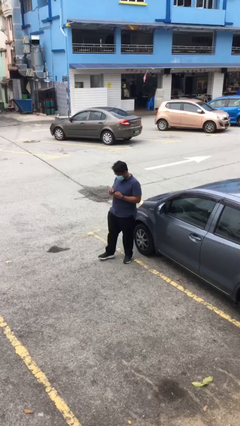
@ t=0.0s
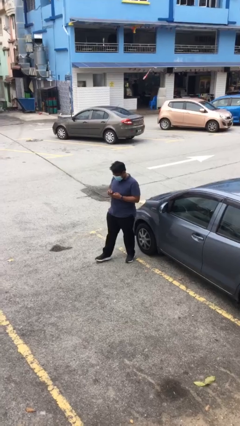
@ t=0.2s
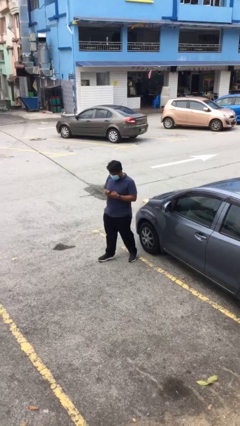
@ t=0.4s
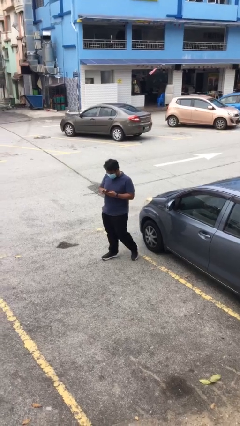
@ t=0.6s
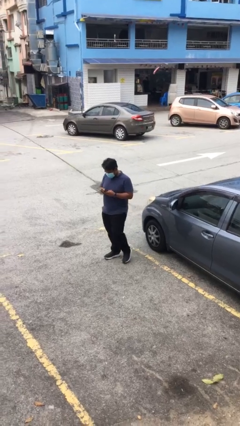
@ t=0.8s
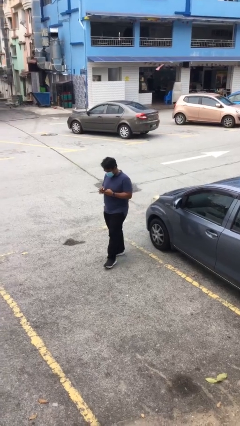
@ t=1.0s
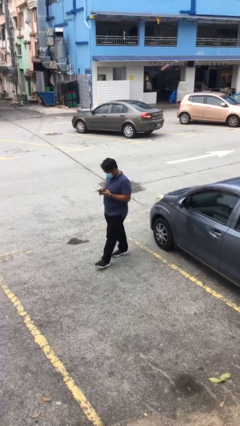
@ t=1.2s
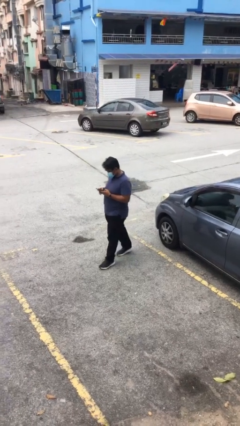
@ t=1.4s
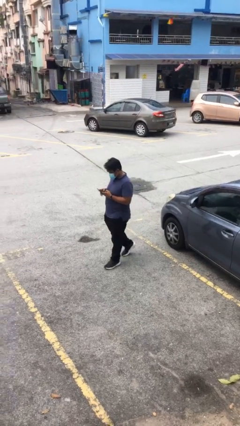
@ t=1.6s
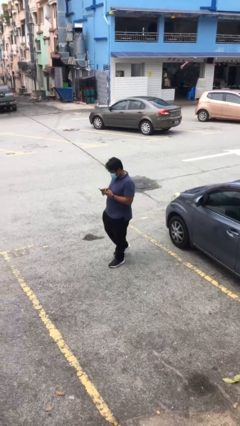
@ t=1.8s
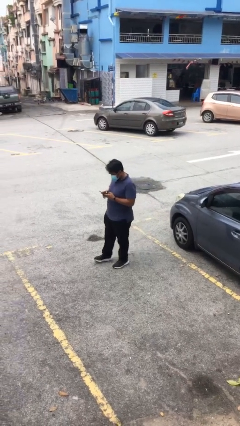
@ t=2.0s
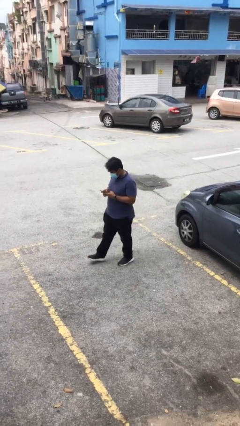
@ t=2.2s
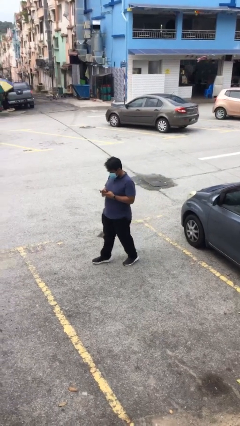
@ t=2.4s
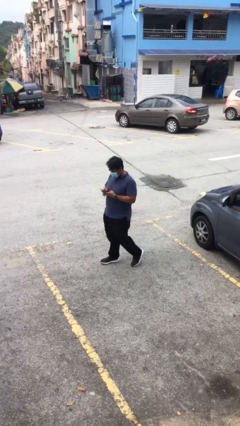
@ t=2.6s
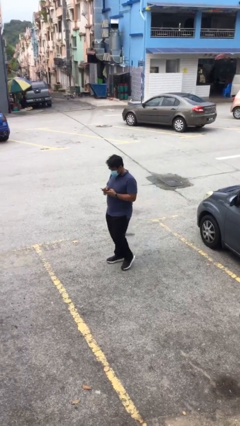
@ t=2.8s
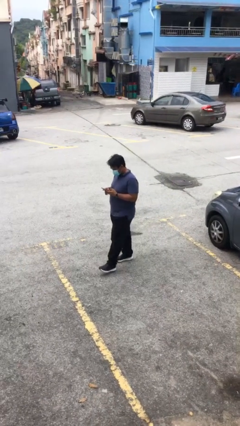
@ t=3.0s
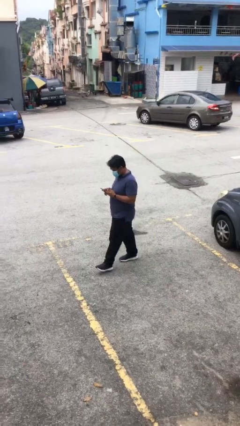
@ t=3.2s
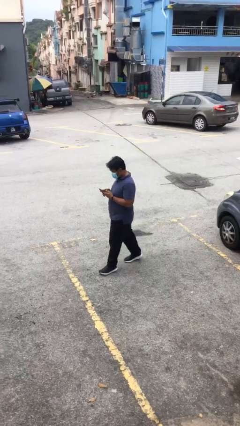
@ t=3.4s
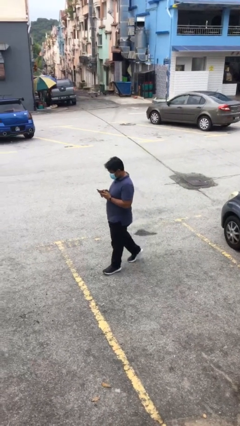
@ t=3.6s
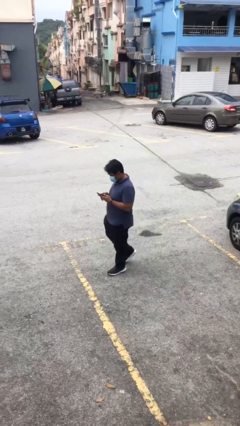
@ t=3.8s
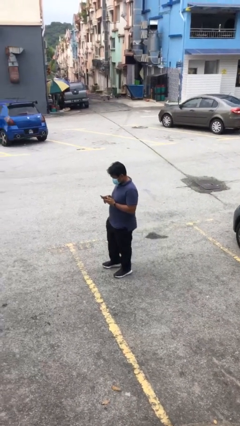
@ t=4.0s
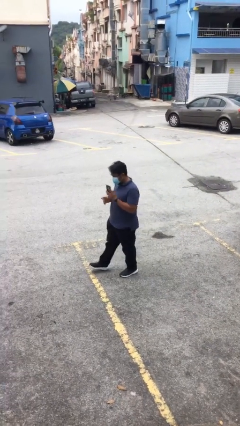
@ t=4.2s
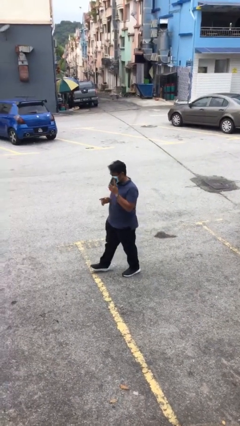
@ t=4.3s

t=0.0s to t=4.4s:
person texts on phone

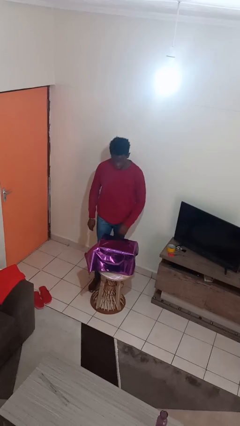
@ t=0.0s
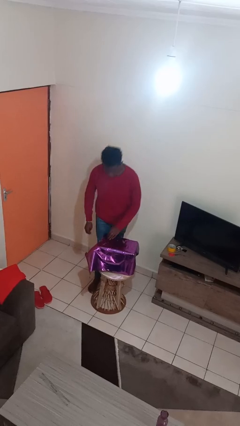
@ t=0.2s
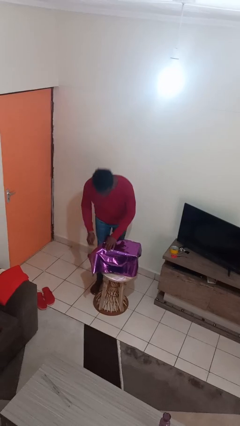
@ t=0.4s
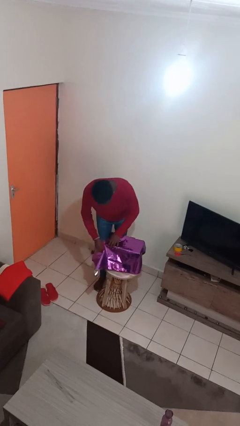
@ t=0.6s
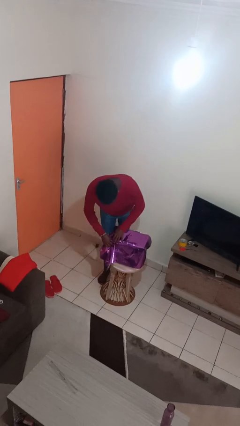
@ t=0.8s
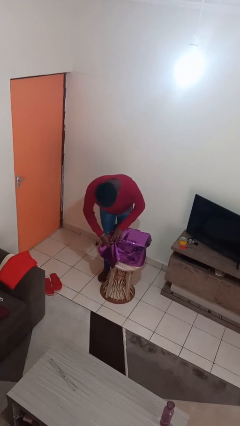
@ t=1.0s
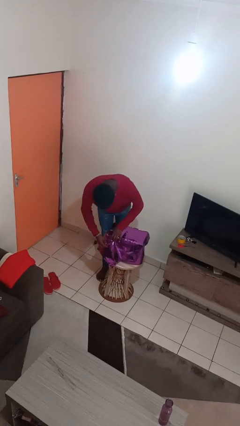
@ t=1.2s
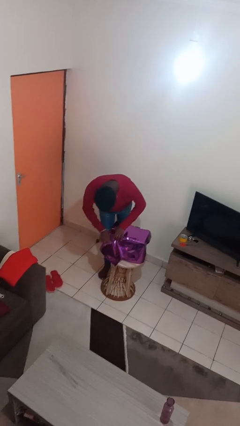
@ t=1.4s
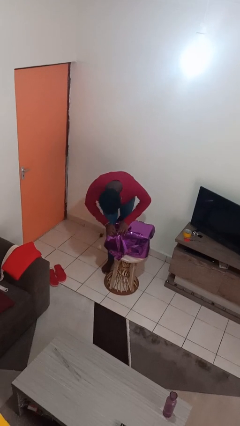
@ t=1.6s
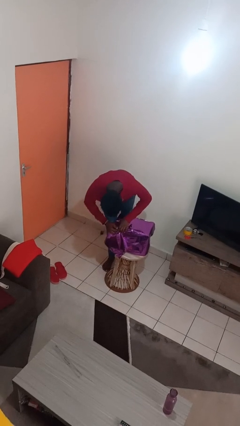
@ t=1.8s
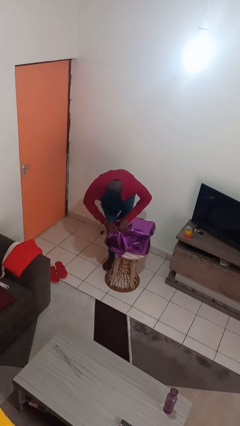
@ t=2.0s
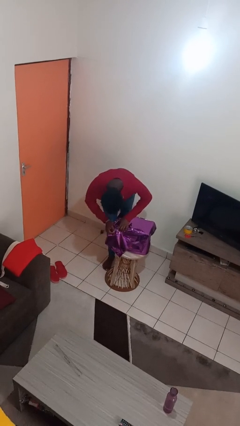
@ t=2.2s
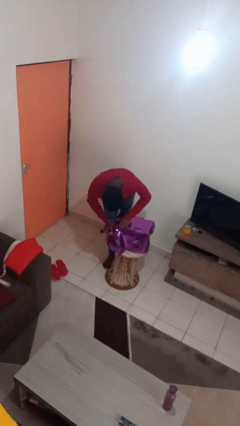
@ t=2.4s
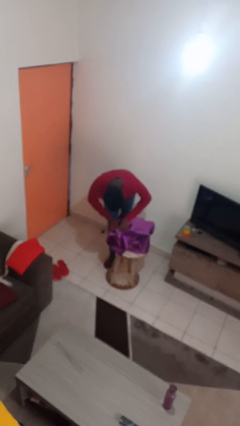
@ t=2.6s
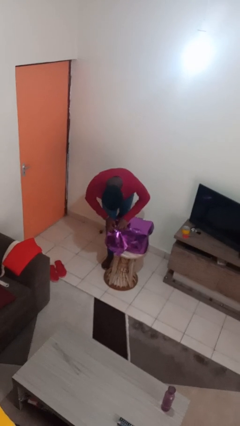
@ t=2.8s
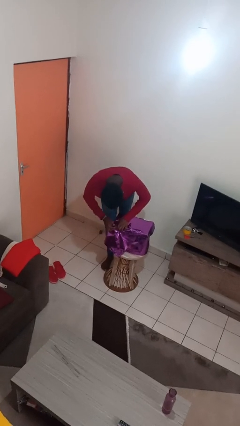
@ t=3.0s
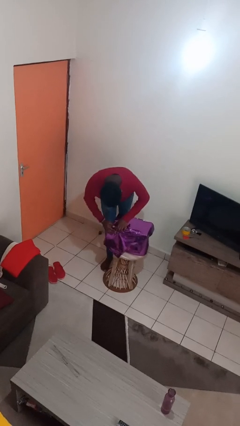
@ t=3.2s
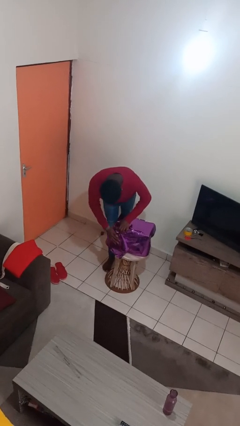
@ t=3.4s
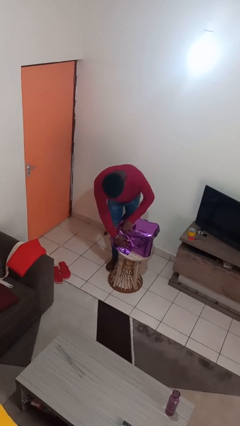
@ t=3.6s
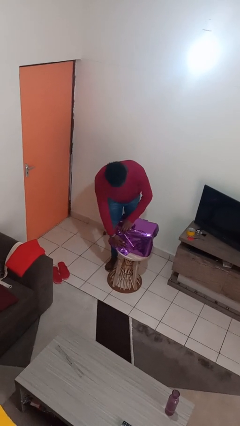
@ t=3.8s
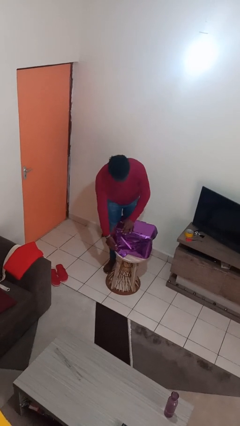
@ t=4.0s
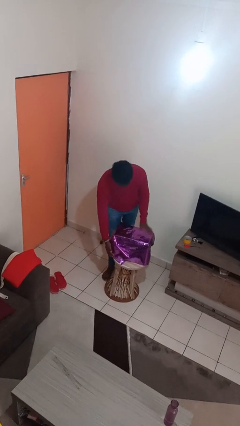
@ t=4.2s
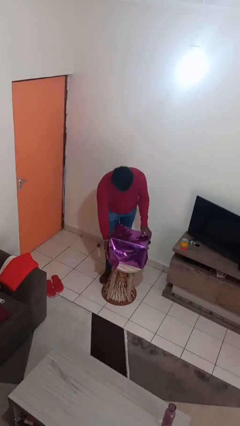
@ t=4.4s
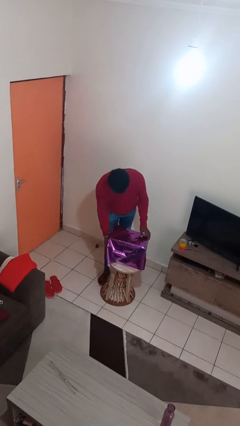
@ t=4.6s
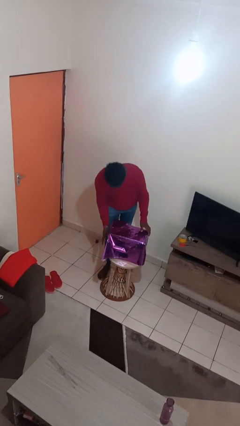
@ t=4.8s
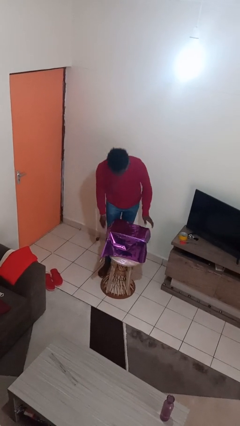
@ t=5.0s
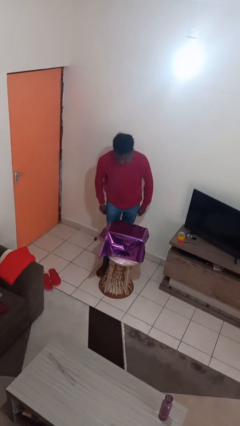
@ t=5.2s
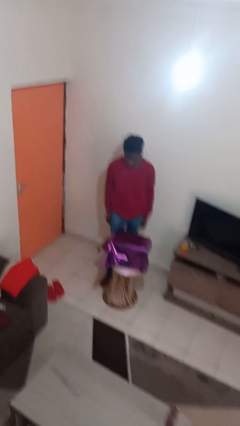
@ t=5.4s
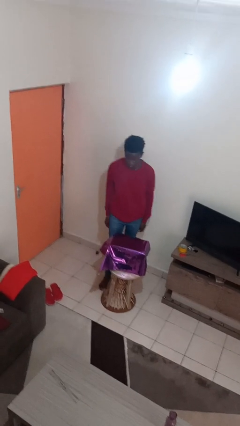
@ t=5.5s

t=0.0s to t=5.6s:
person wraps box

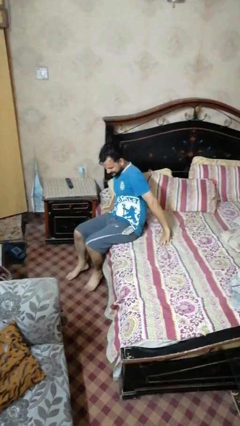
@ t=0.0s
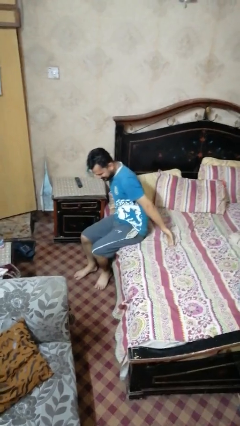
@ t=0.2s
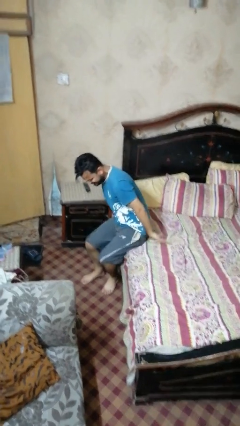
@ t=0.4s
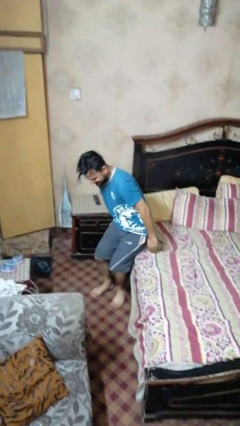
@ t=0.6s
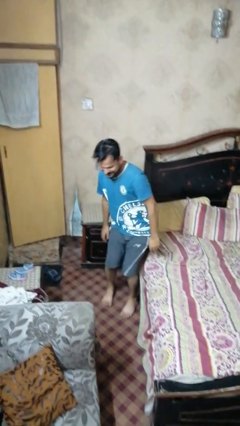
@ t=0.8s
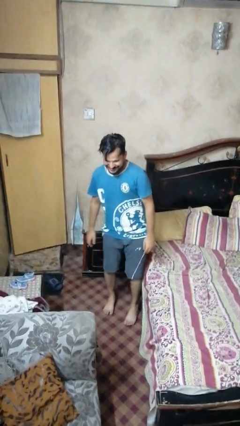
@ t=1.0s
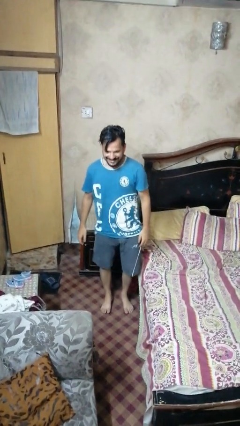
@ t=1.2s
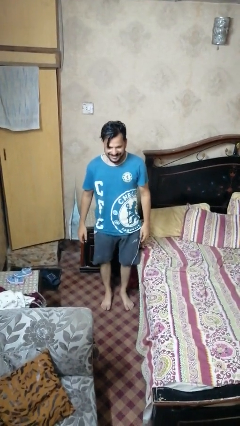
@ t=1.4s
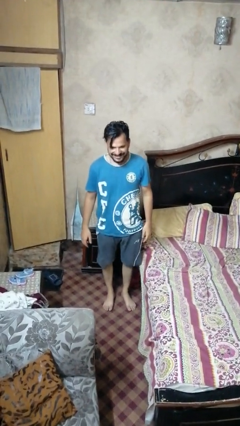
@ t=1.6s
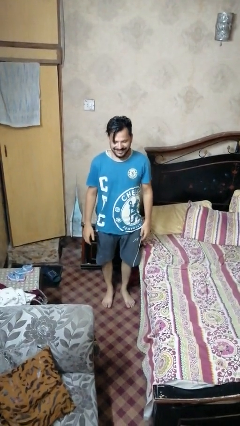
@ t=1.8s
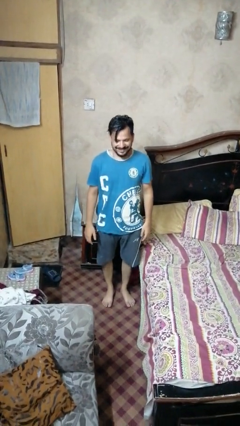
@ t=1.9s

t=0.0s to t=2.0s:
person stands up

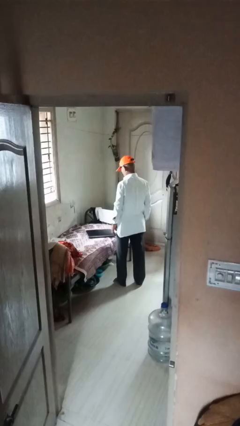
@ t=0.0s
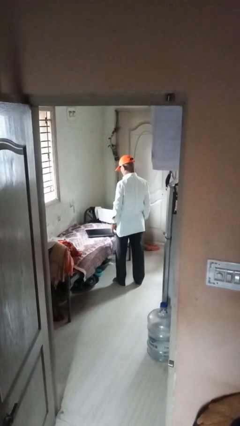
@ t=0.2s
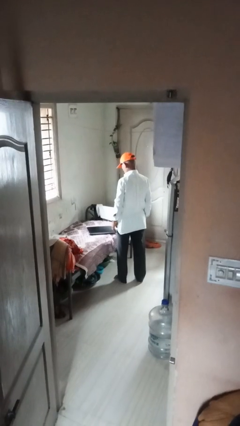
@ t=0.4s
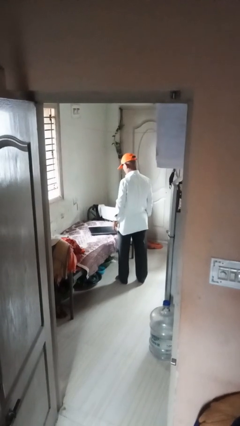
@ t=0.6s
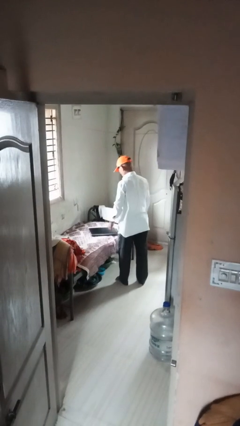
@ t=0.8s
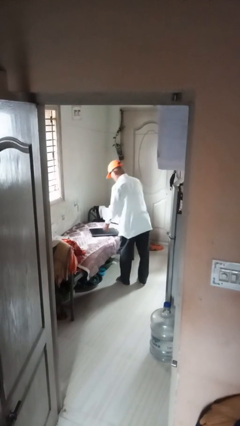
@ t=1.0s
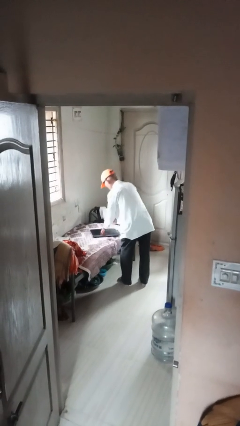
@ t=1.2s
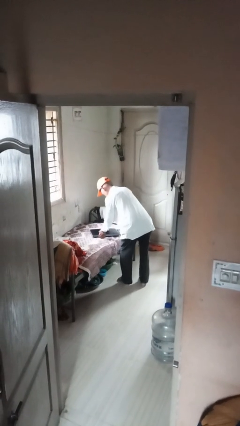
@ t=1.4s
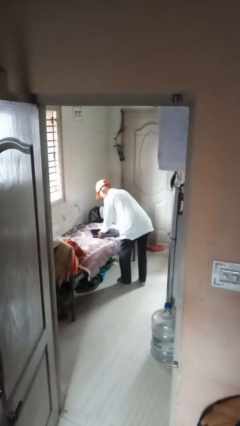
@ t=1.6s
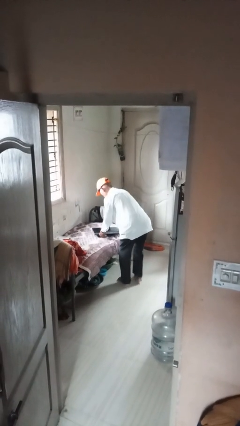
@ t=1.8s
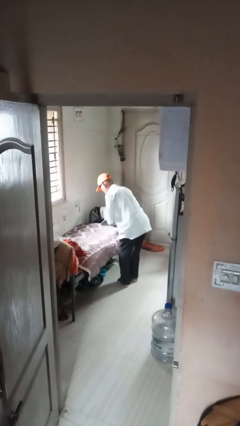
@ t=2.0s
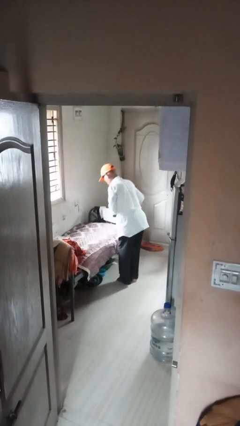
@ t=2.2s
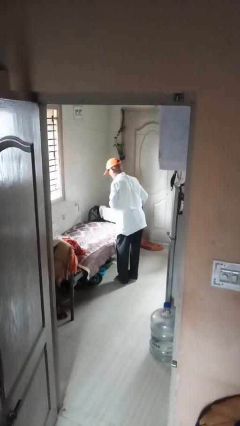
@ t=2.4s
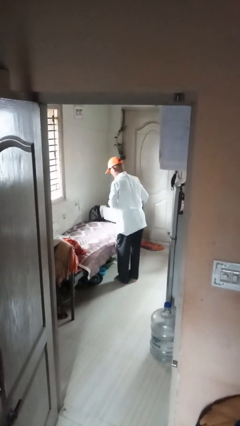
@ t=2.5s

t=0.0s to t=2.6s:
person picks up object from bed

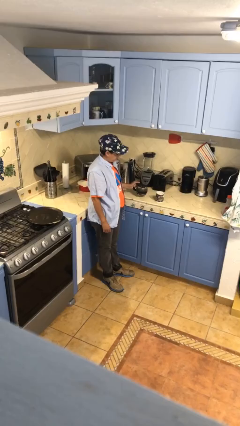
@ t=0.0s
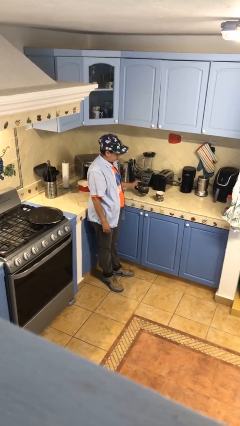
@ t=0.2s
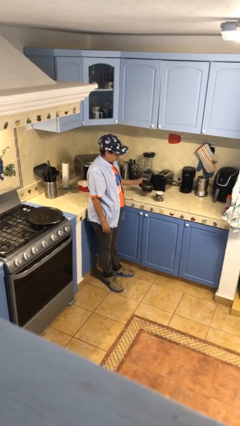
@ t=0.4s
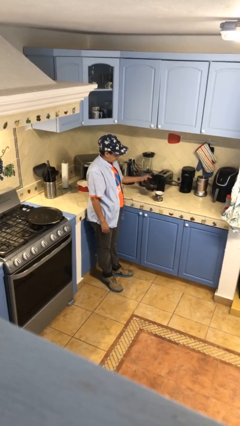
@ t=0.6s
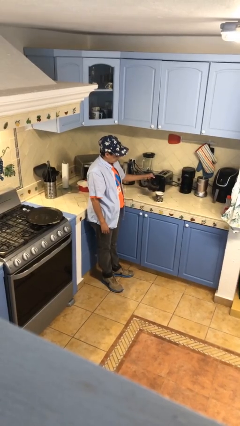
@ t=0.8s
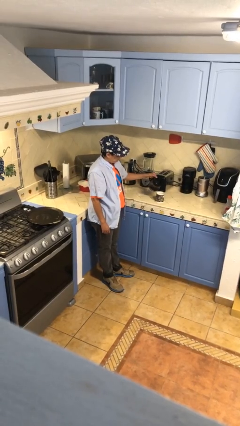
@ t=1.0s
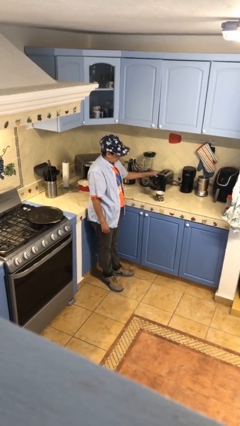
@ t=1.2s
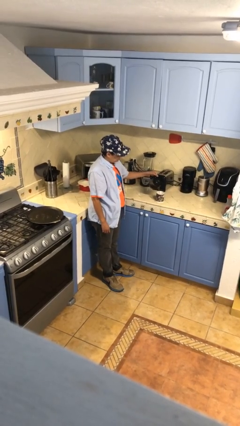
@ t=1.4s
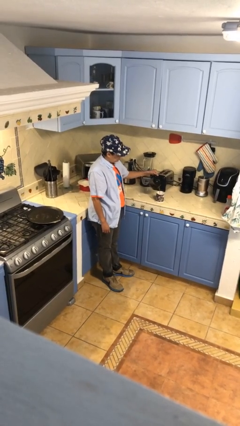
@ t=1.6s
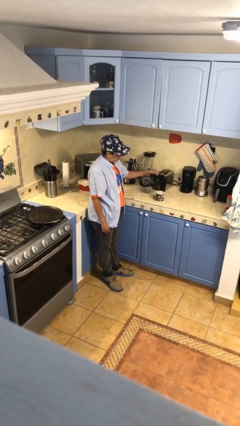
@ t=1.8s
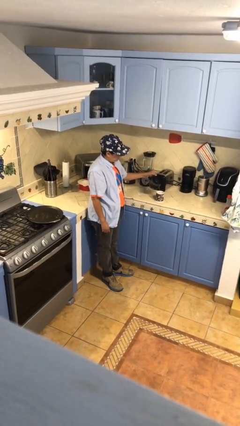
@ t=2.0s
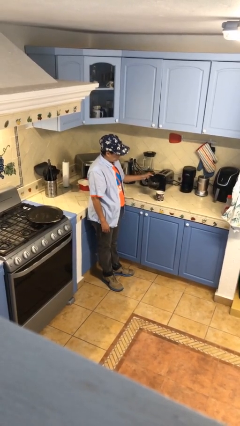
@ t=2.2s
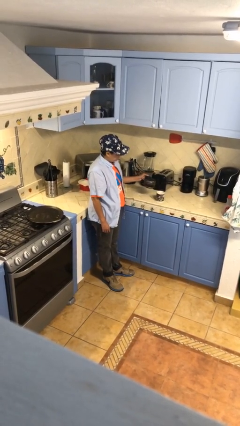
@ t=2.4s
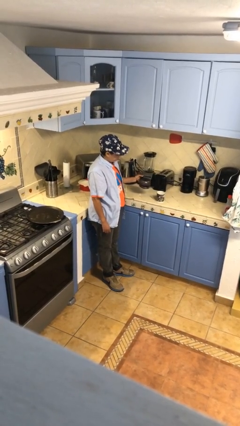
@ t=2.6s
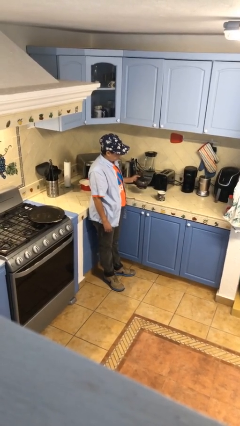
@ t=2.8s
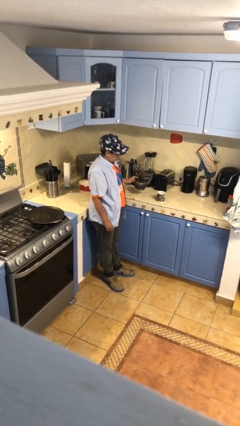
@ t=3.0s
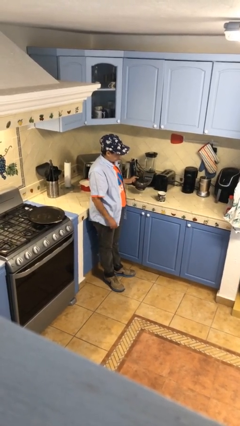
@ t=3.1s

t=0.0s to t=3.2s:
person pours coffee into mug
